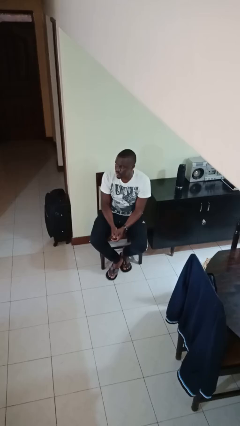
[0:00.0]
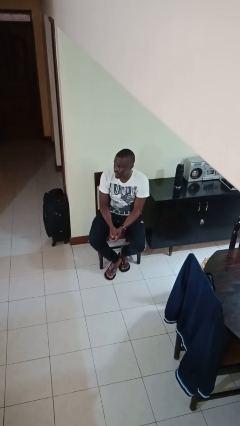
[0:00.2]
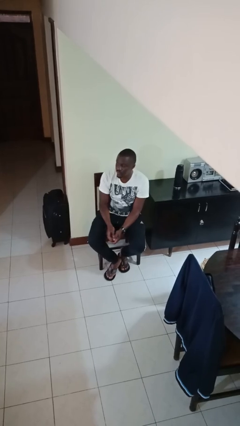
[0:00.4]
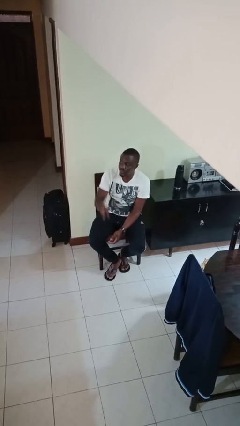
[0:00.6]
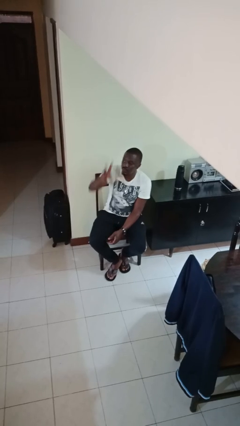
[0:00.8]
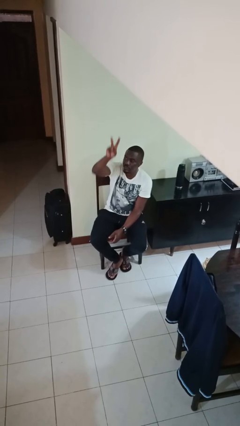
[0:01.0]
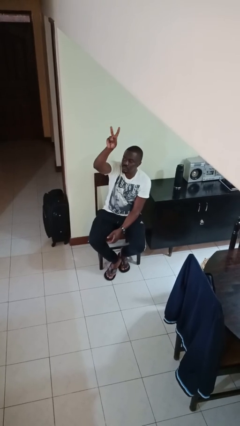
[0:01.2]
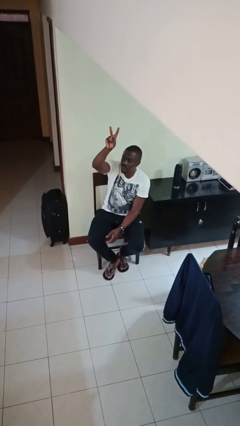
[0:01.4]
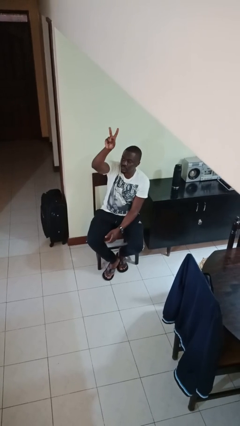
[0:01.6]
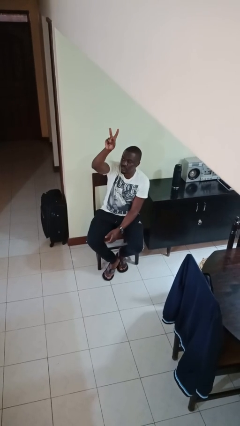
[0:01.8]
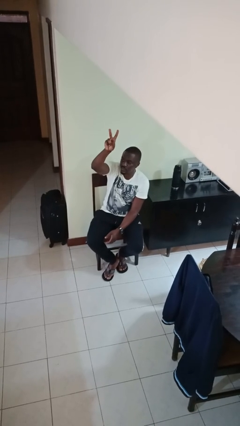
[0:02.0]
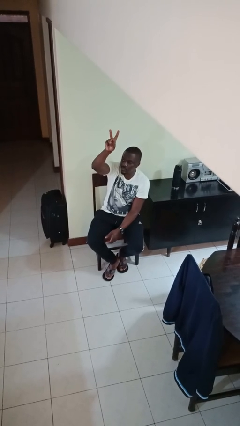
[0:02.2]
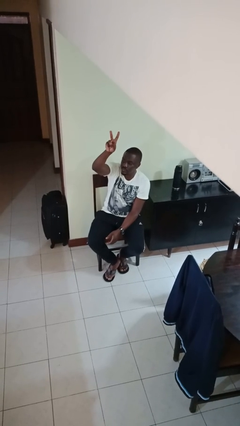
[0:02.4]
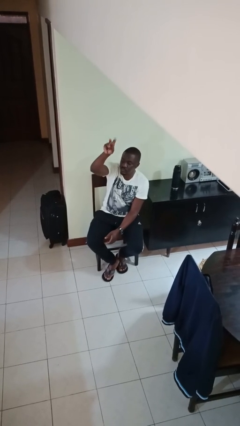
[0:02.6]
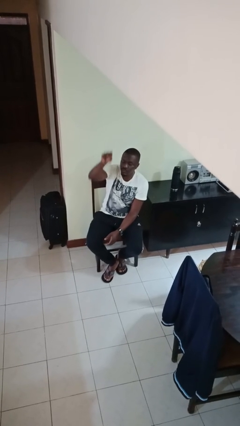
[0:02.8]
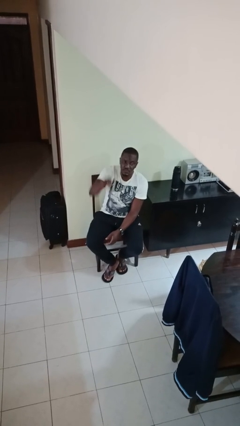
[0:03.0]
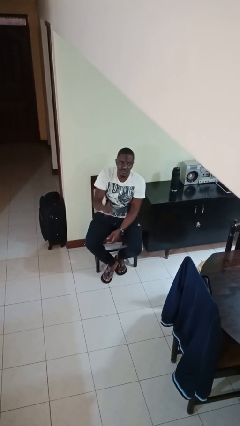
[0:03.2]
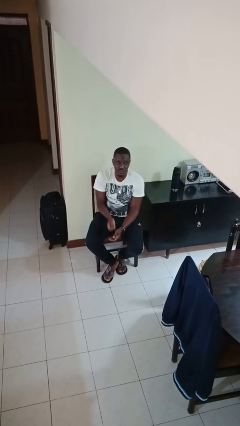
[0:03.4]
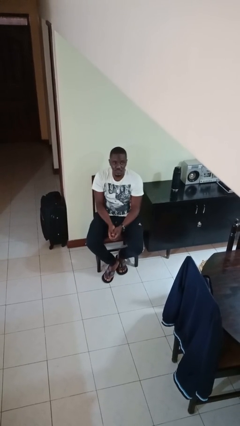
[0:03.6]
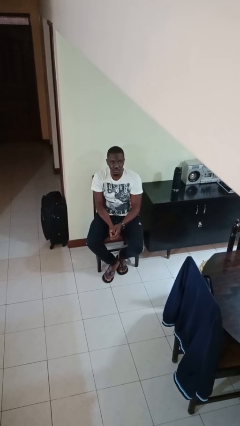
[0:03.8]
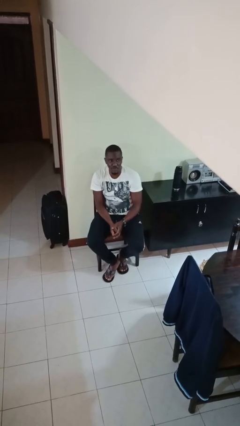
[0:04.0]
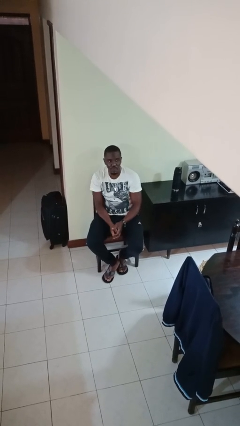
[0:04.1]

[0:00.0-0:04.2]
person gestures peace

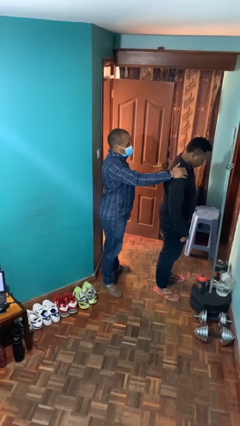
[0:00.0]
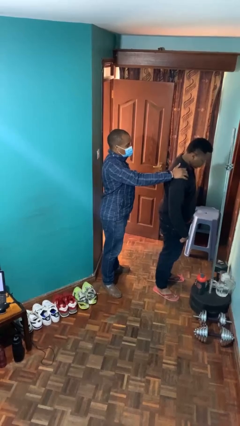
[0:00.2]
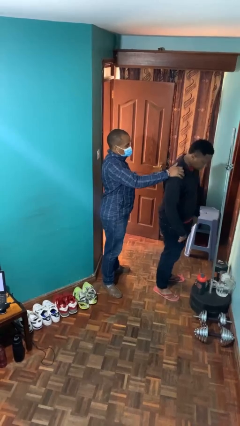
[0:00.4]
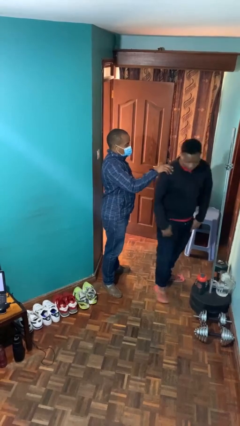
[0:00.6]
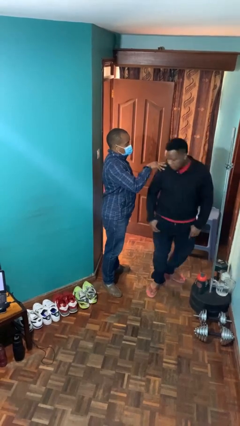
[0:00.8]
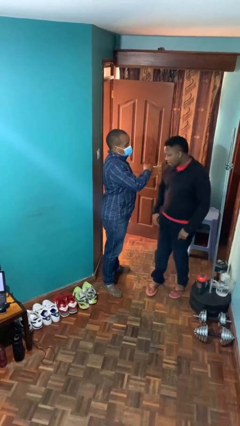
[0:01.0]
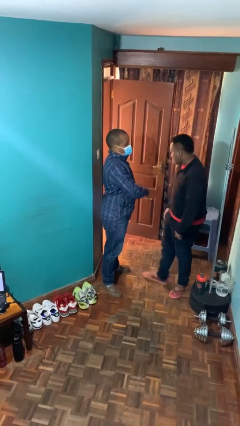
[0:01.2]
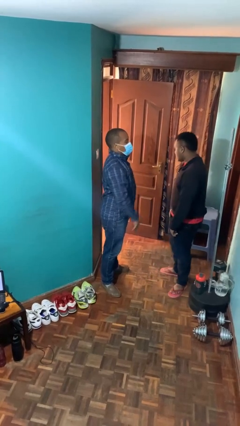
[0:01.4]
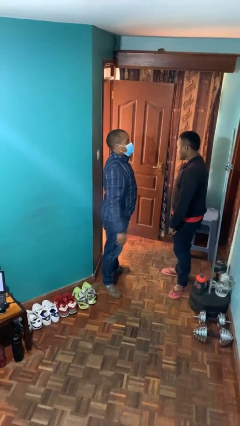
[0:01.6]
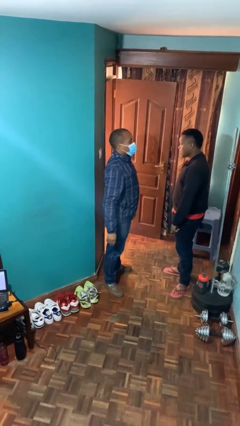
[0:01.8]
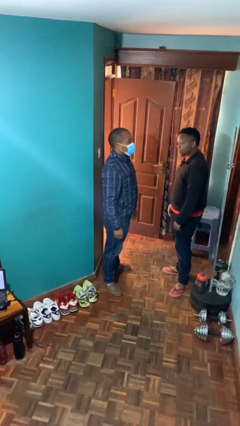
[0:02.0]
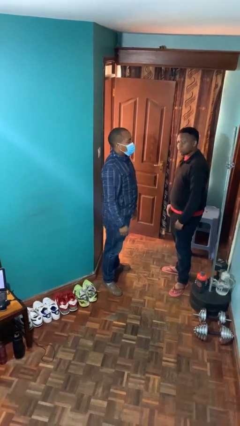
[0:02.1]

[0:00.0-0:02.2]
person spins person around

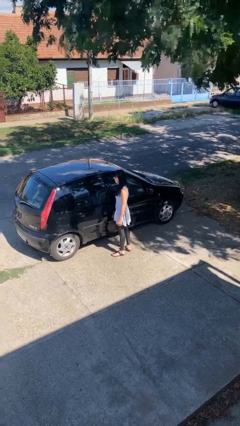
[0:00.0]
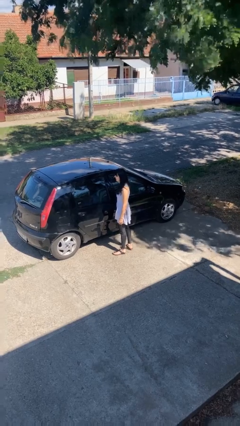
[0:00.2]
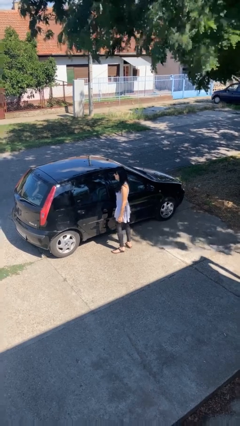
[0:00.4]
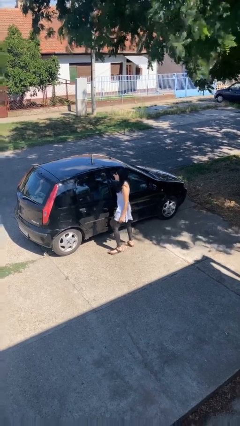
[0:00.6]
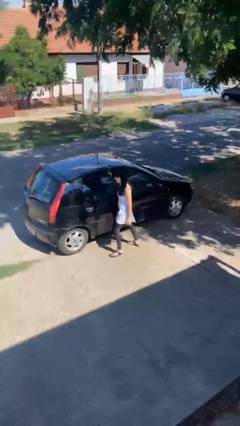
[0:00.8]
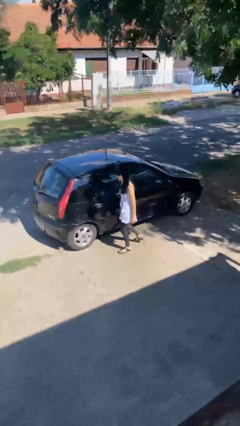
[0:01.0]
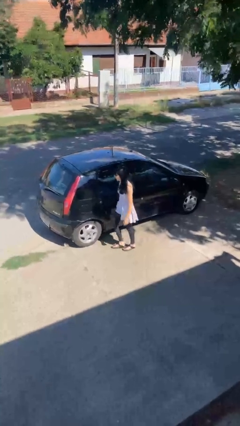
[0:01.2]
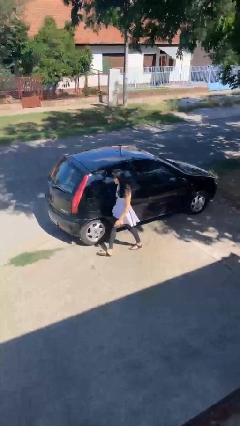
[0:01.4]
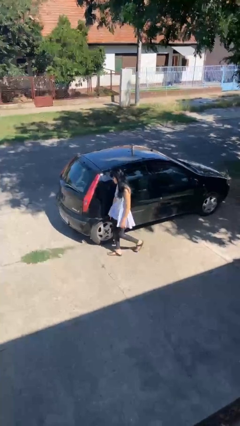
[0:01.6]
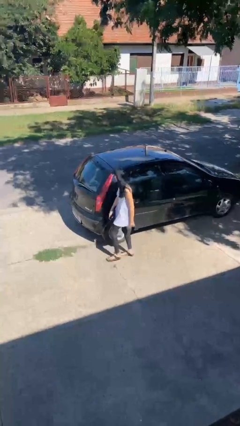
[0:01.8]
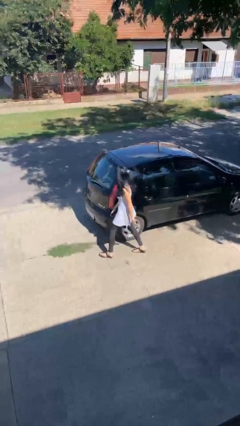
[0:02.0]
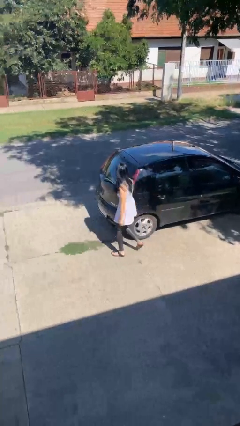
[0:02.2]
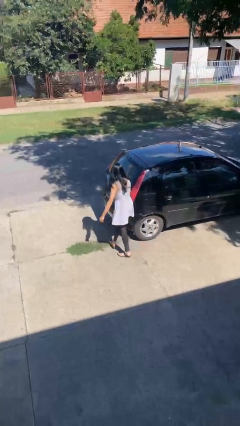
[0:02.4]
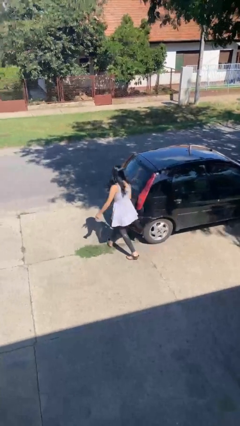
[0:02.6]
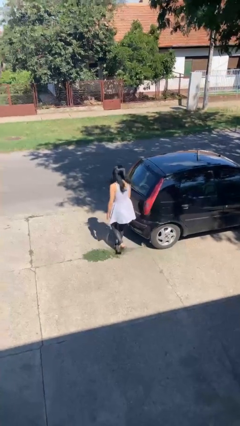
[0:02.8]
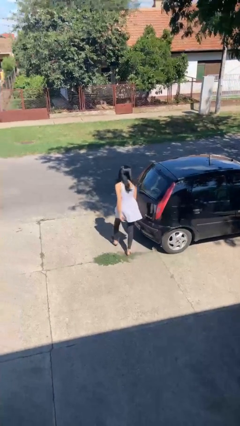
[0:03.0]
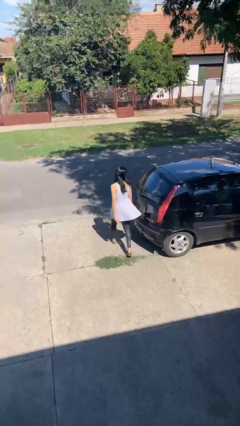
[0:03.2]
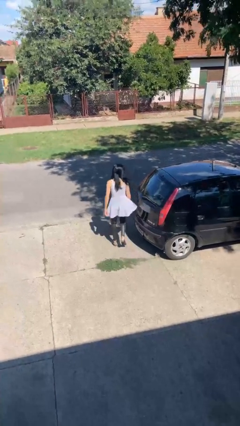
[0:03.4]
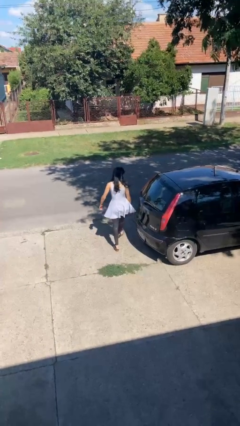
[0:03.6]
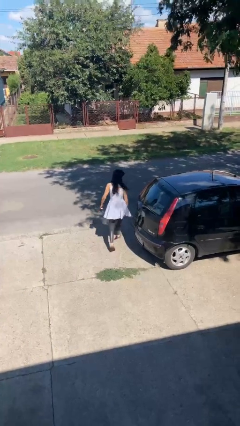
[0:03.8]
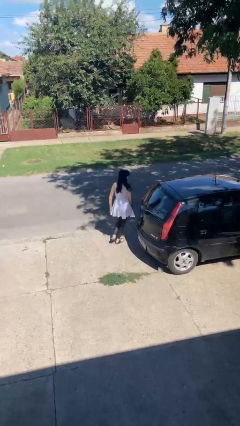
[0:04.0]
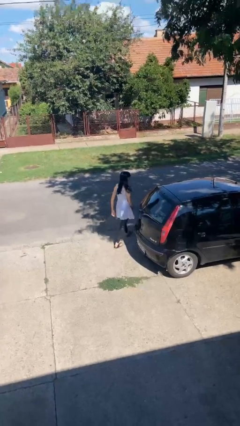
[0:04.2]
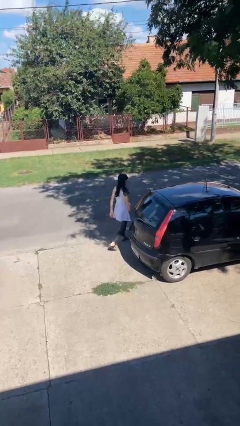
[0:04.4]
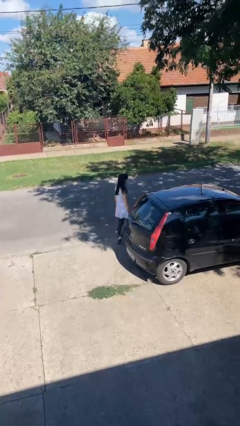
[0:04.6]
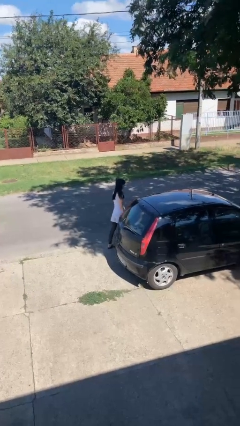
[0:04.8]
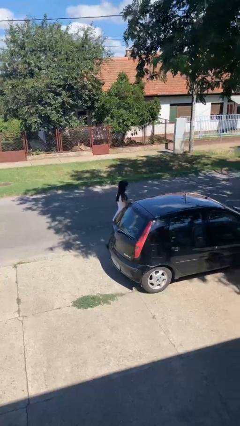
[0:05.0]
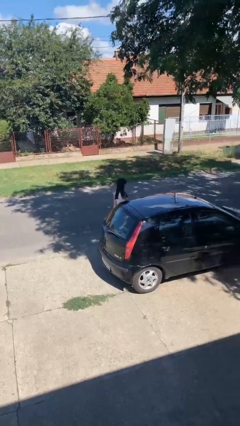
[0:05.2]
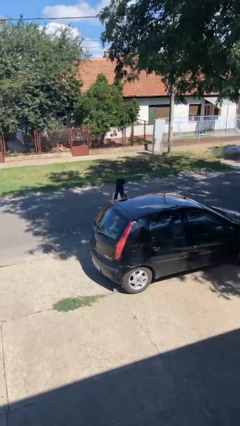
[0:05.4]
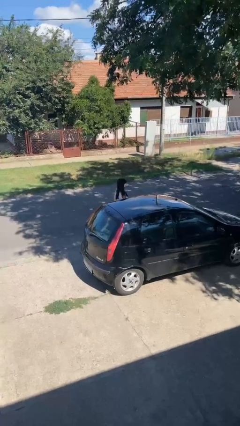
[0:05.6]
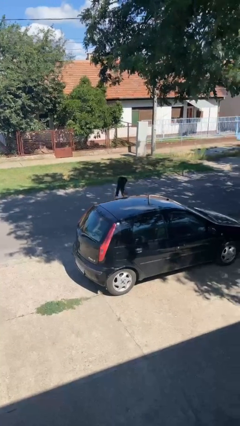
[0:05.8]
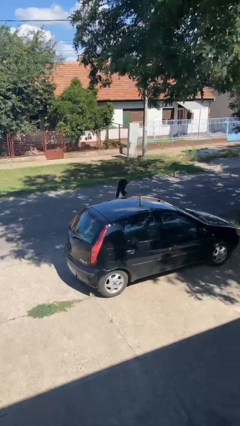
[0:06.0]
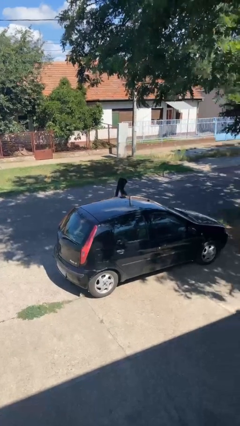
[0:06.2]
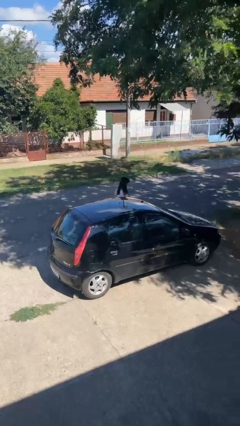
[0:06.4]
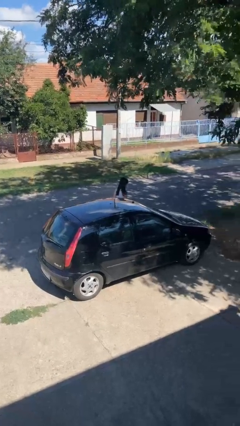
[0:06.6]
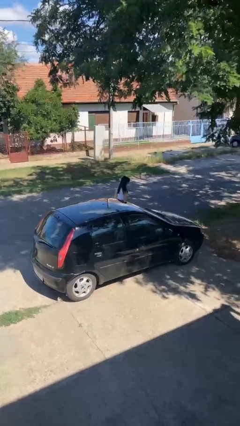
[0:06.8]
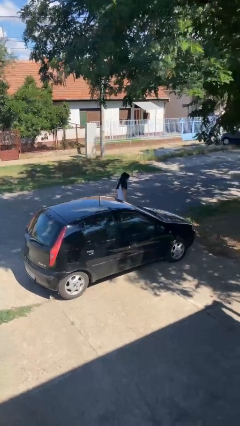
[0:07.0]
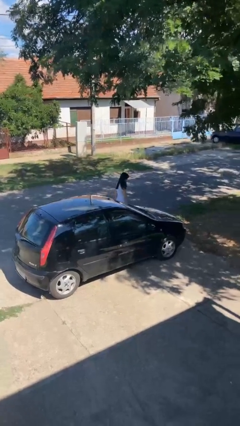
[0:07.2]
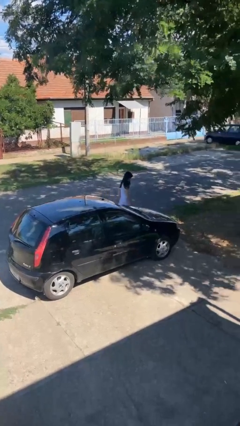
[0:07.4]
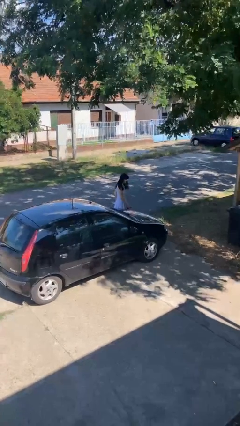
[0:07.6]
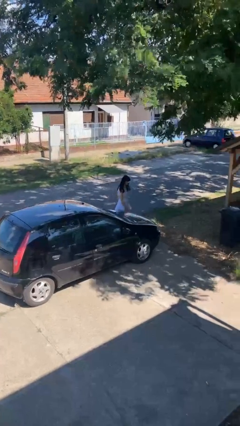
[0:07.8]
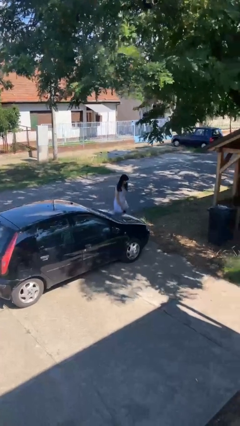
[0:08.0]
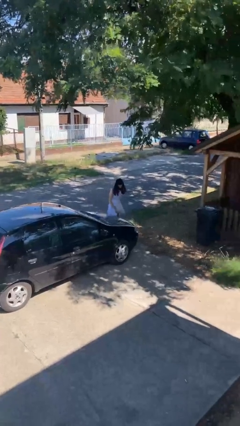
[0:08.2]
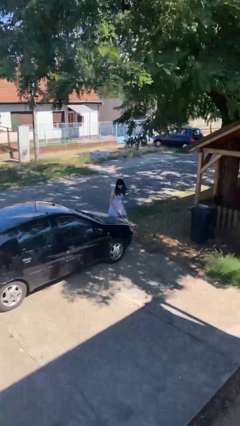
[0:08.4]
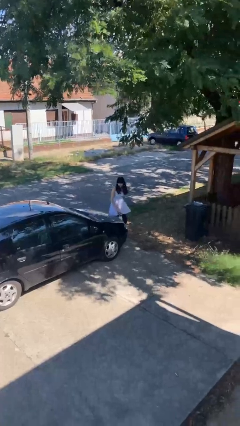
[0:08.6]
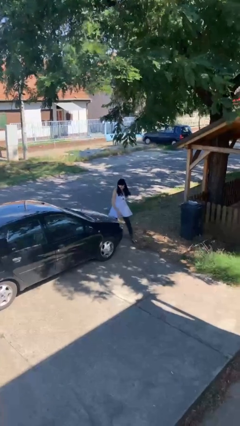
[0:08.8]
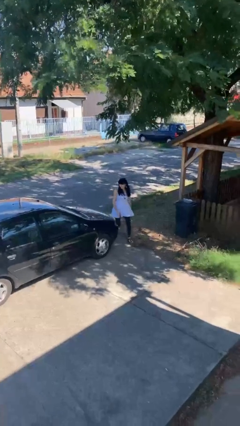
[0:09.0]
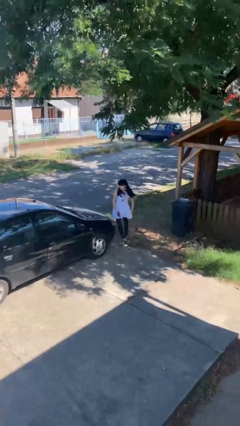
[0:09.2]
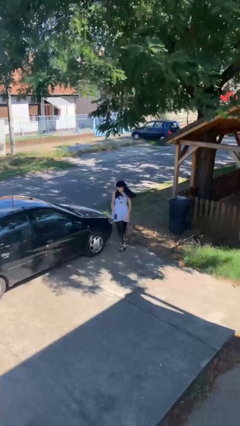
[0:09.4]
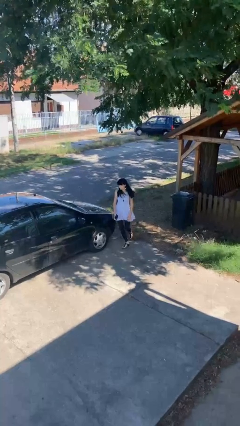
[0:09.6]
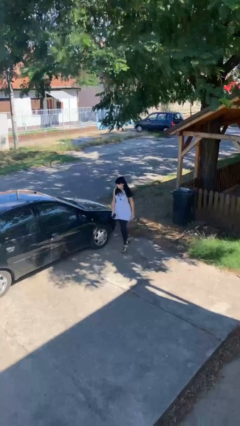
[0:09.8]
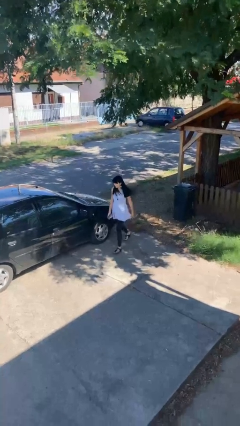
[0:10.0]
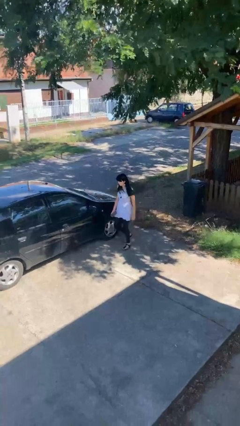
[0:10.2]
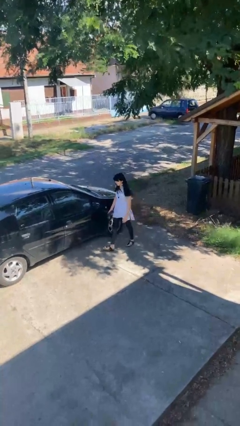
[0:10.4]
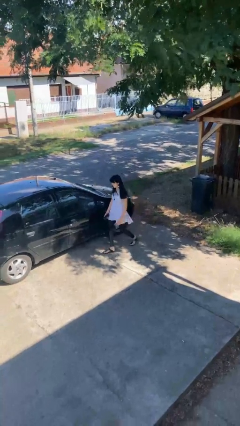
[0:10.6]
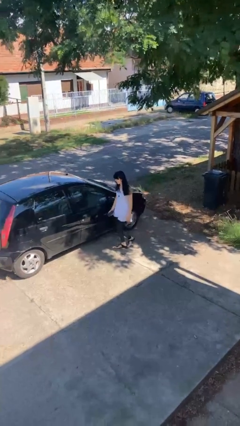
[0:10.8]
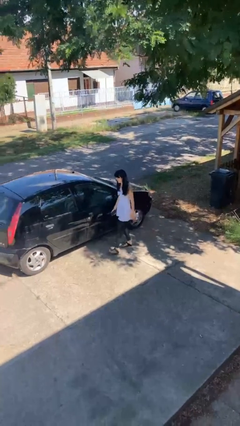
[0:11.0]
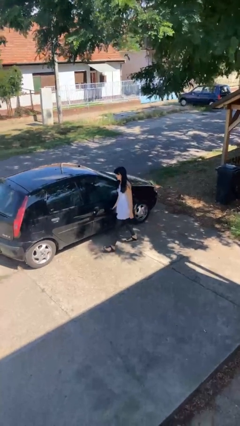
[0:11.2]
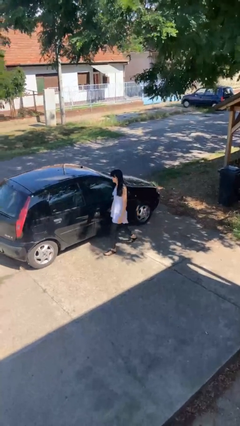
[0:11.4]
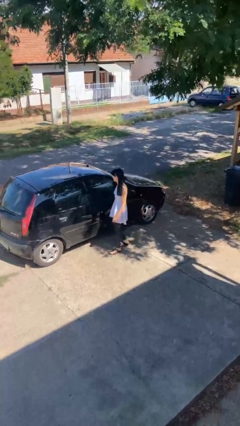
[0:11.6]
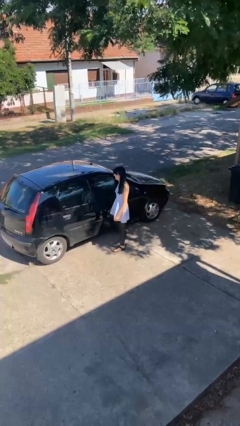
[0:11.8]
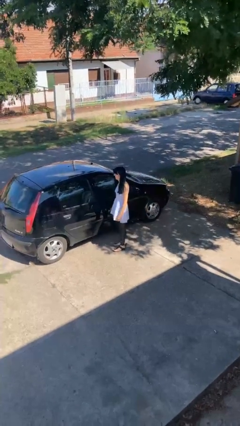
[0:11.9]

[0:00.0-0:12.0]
person walks around car
